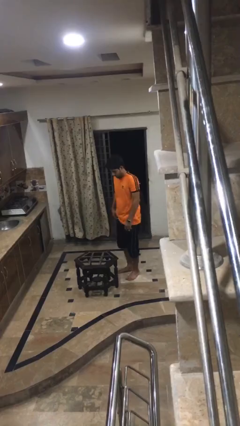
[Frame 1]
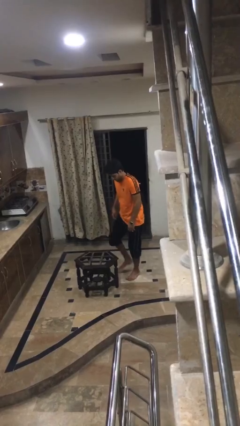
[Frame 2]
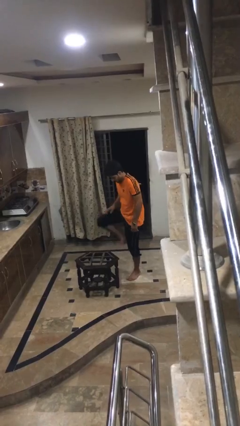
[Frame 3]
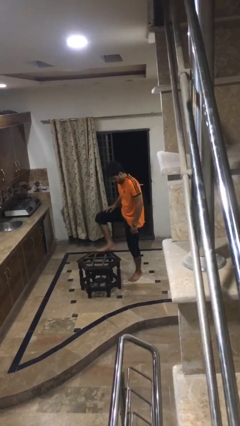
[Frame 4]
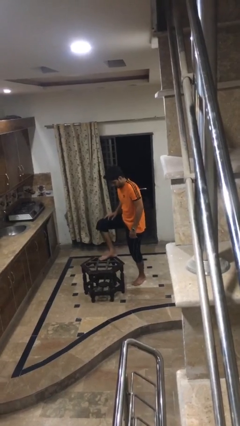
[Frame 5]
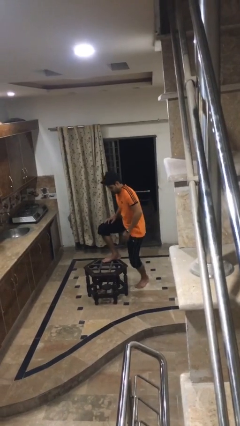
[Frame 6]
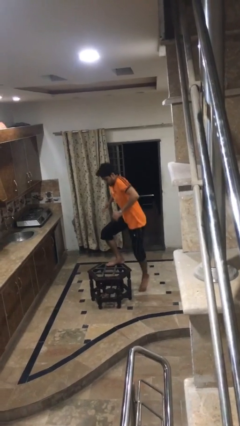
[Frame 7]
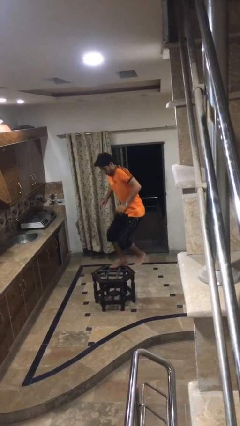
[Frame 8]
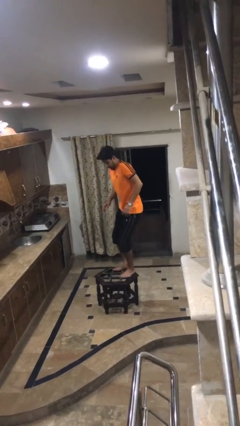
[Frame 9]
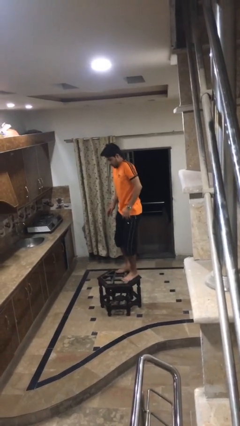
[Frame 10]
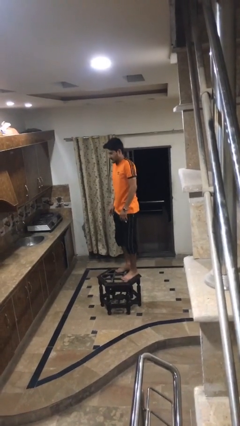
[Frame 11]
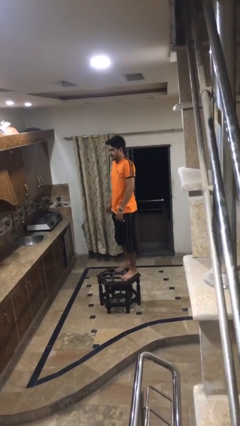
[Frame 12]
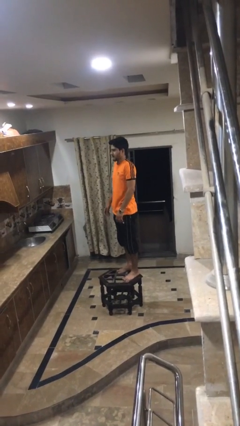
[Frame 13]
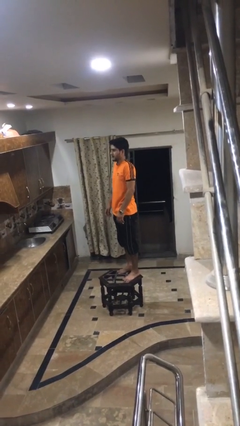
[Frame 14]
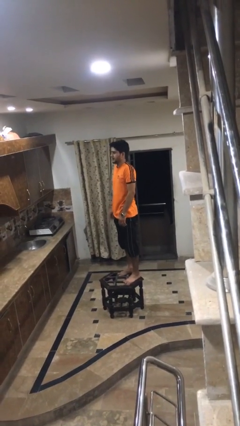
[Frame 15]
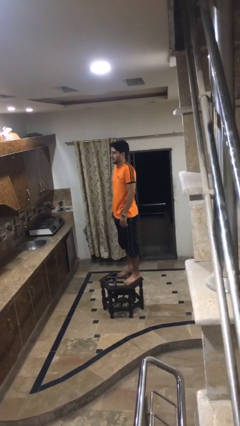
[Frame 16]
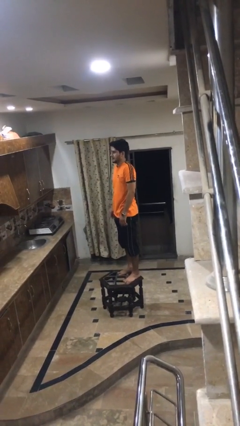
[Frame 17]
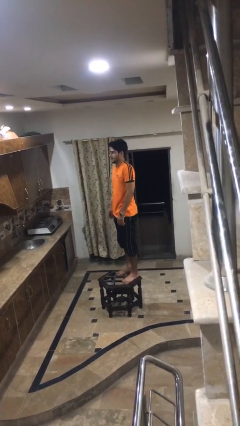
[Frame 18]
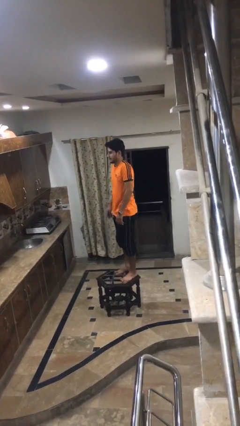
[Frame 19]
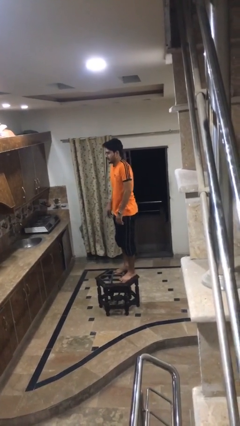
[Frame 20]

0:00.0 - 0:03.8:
person climbs on table

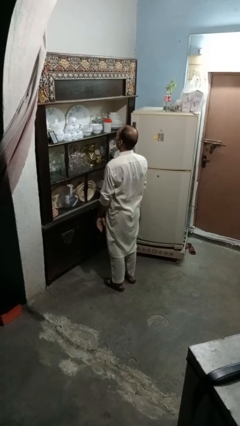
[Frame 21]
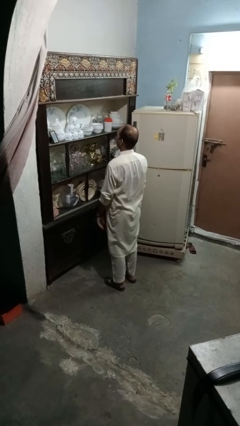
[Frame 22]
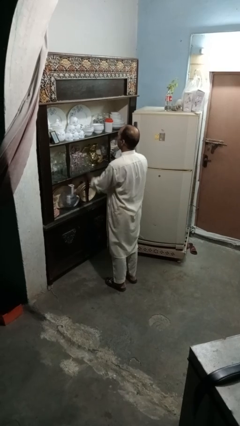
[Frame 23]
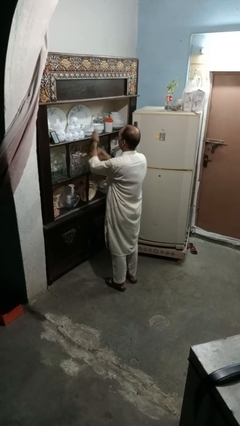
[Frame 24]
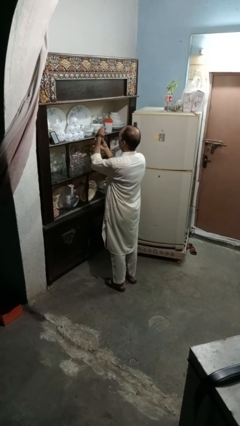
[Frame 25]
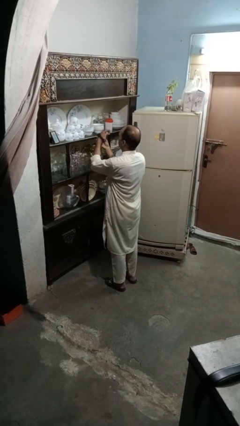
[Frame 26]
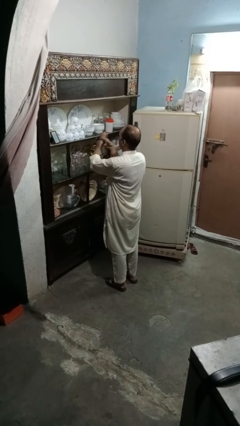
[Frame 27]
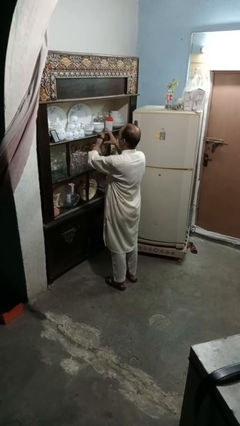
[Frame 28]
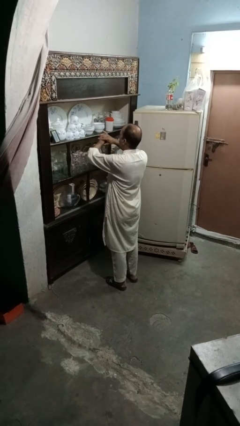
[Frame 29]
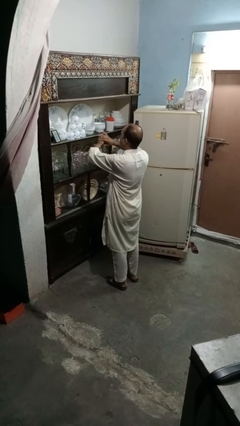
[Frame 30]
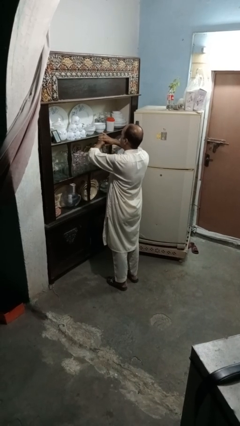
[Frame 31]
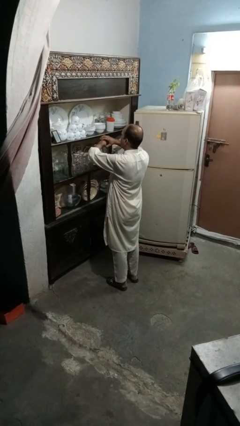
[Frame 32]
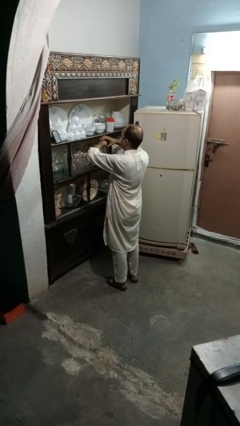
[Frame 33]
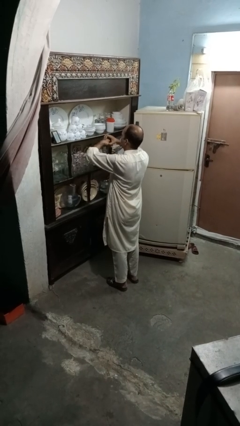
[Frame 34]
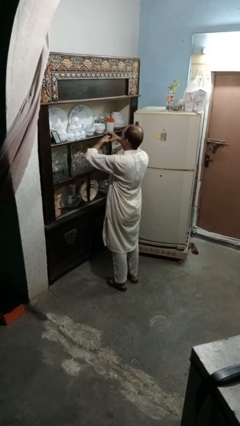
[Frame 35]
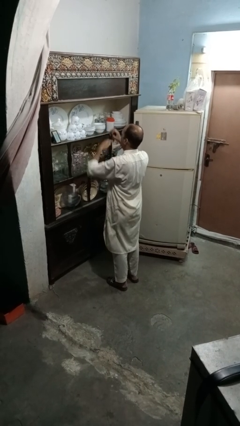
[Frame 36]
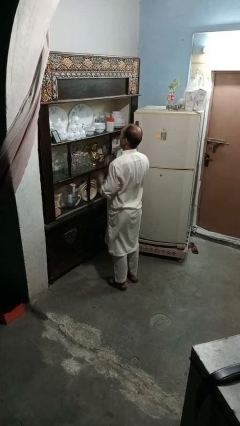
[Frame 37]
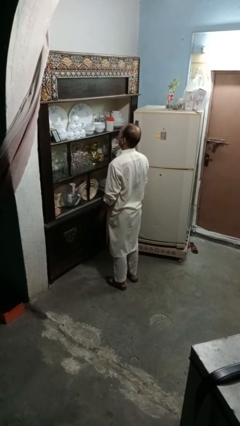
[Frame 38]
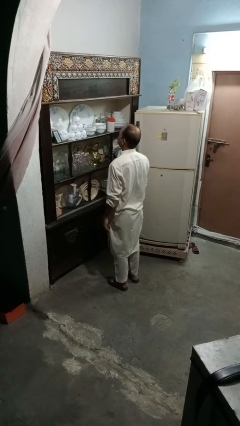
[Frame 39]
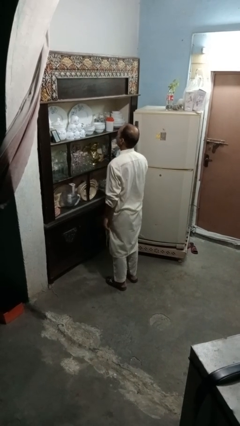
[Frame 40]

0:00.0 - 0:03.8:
person takes off wristwatch

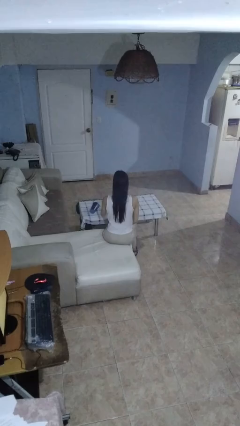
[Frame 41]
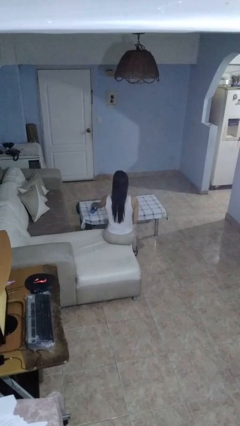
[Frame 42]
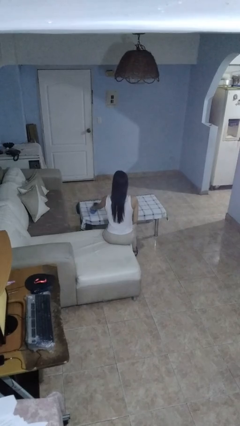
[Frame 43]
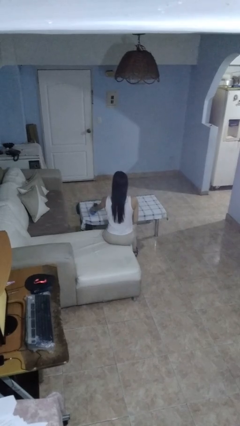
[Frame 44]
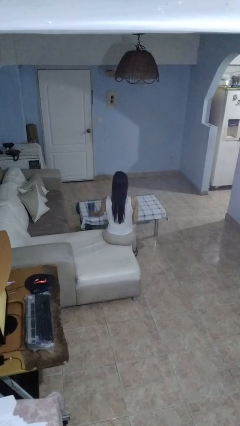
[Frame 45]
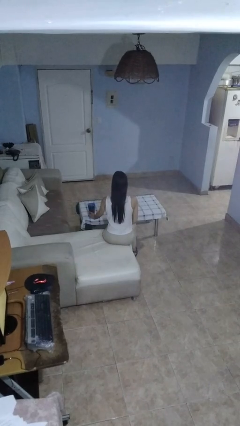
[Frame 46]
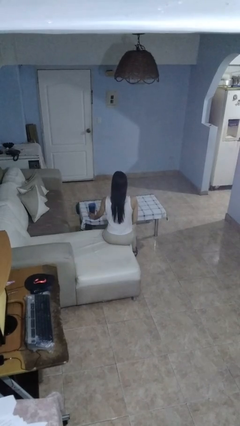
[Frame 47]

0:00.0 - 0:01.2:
person sets upright glass

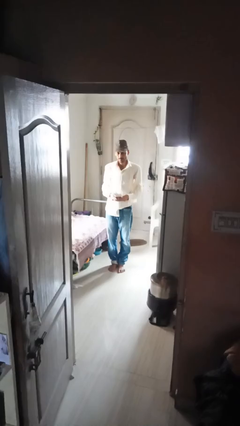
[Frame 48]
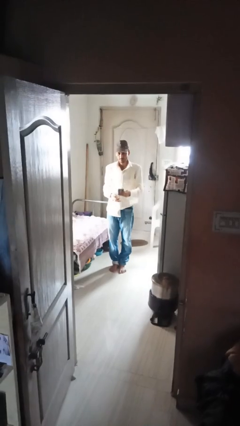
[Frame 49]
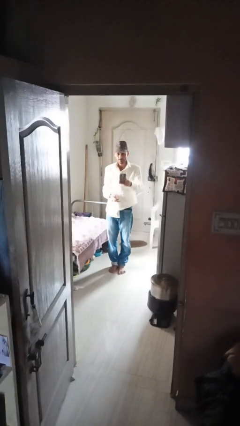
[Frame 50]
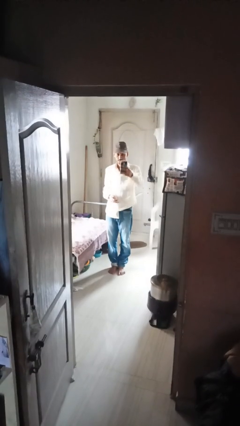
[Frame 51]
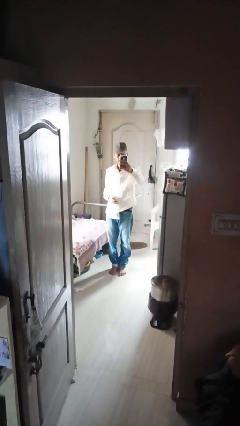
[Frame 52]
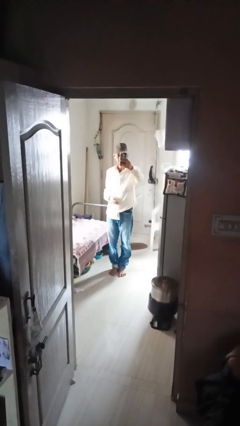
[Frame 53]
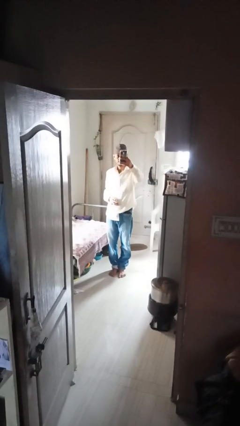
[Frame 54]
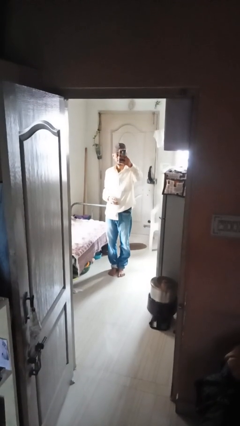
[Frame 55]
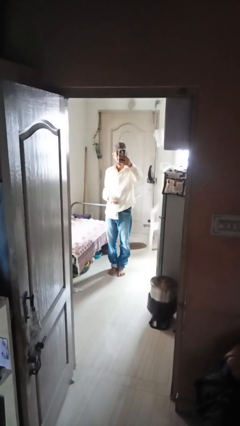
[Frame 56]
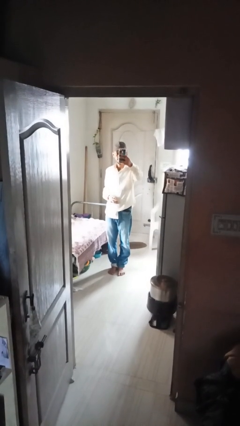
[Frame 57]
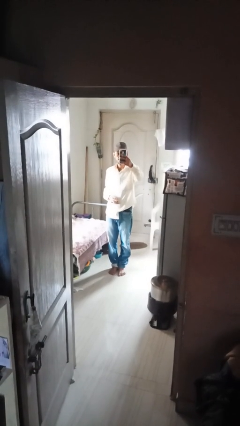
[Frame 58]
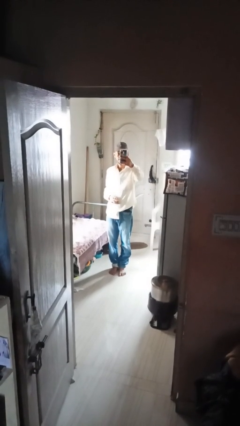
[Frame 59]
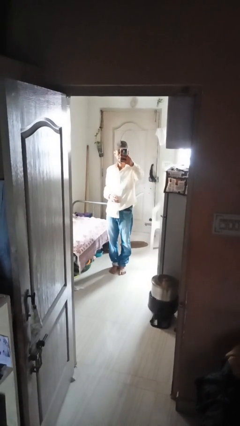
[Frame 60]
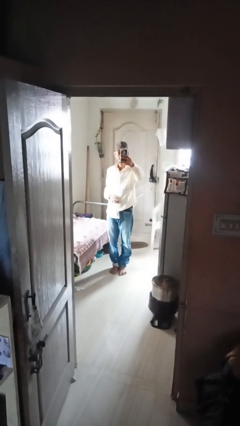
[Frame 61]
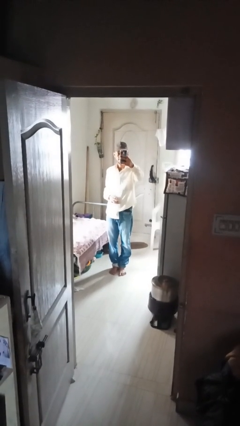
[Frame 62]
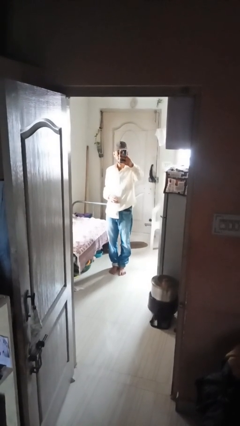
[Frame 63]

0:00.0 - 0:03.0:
person takes selfie

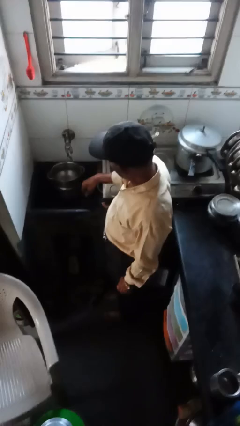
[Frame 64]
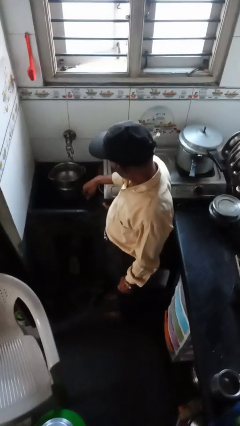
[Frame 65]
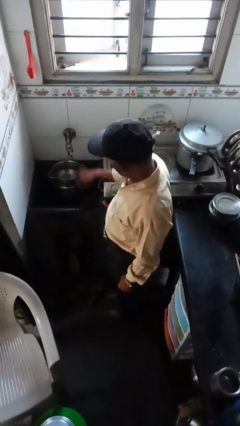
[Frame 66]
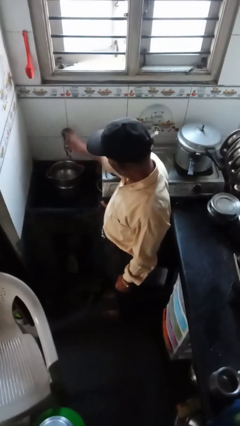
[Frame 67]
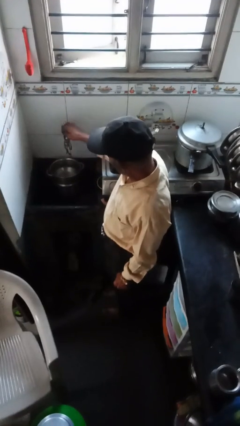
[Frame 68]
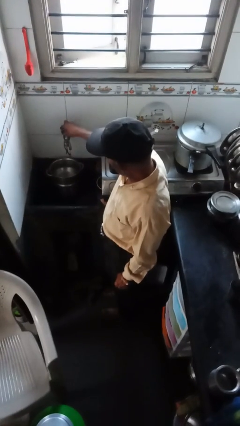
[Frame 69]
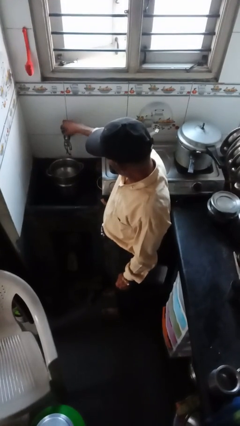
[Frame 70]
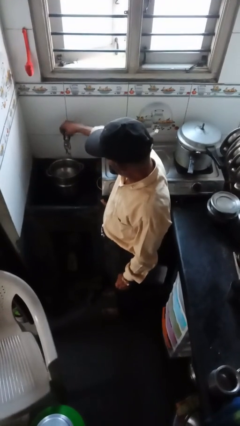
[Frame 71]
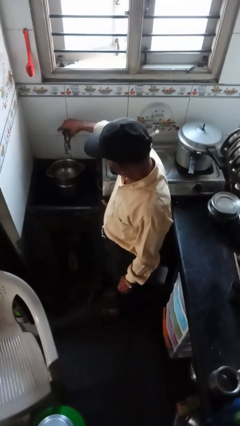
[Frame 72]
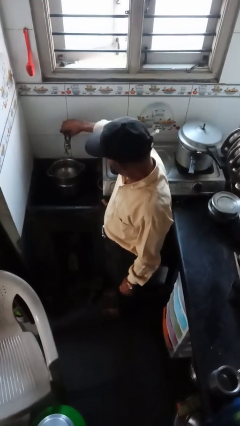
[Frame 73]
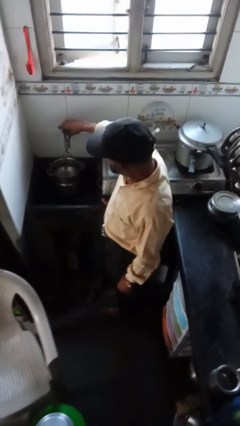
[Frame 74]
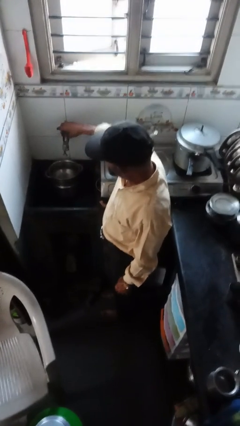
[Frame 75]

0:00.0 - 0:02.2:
person turns on faucet

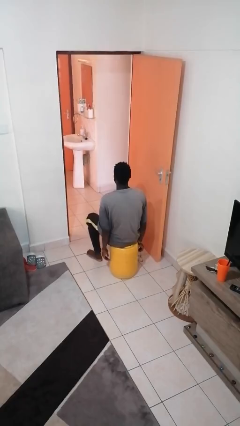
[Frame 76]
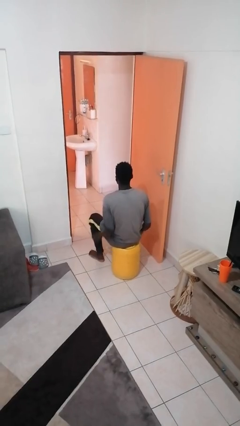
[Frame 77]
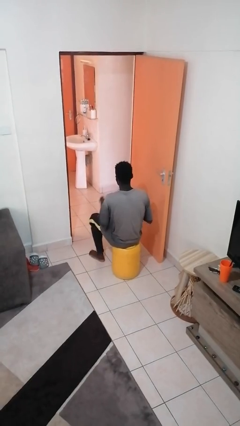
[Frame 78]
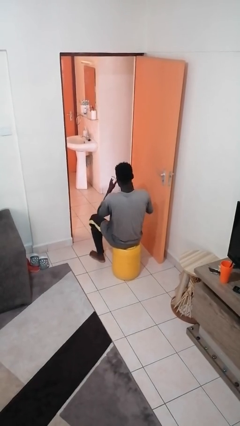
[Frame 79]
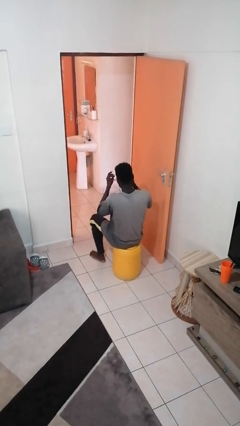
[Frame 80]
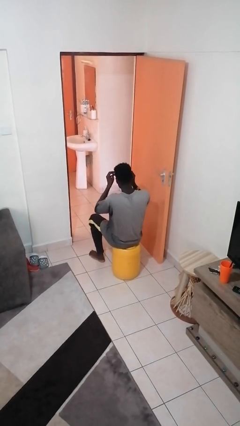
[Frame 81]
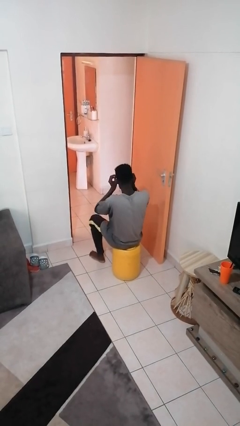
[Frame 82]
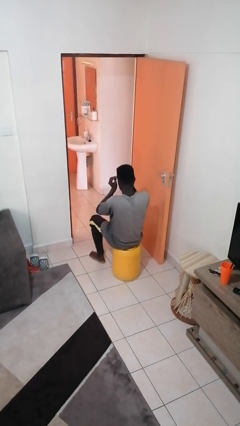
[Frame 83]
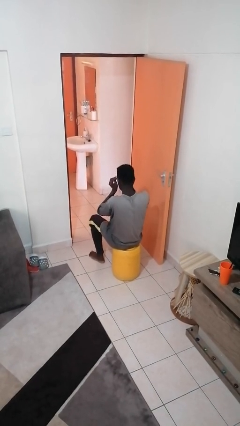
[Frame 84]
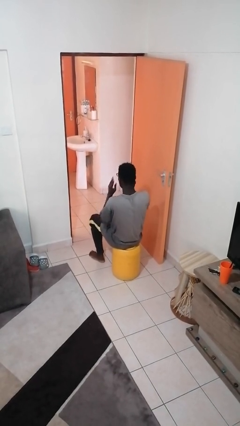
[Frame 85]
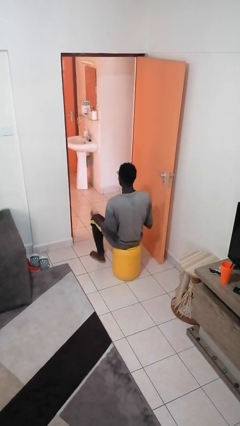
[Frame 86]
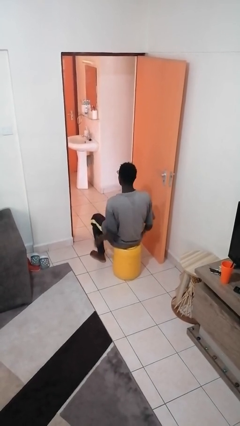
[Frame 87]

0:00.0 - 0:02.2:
person puts on glasses

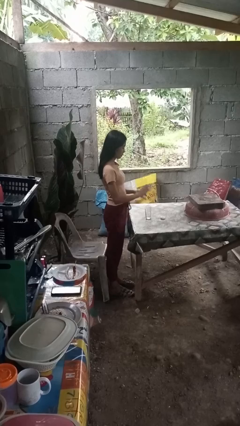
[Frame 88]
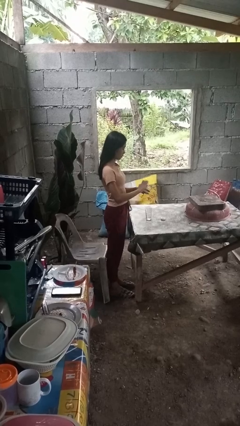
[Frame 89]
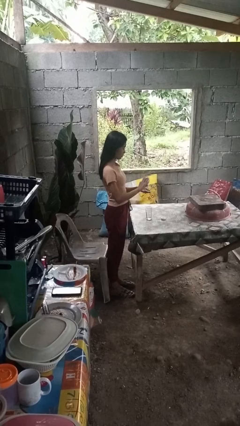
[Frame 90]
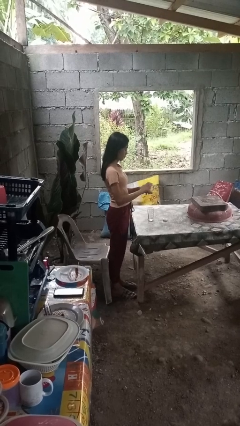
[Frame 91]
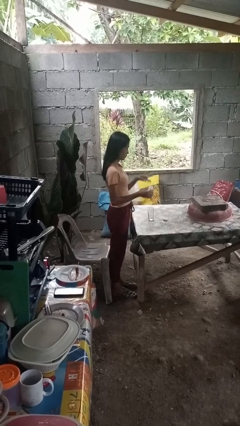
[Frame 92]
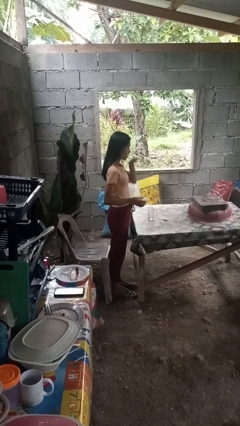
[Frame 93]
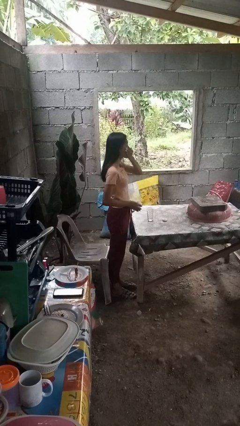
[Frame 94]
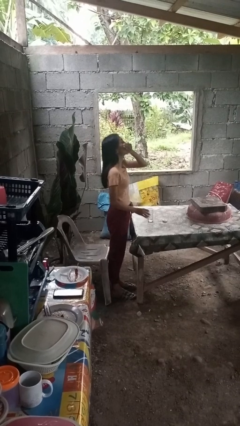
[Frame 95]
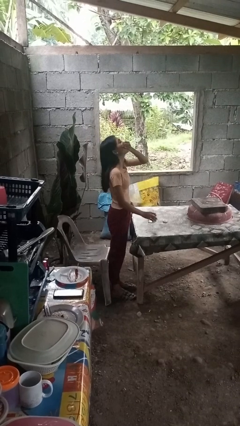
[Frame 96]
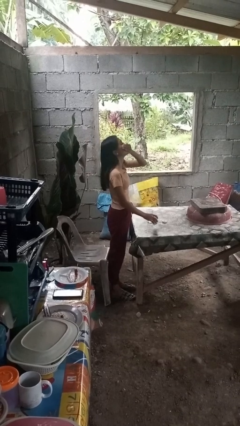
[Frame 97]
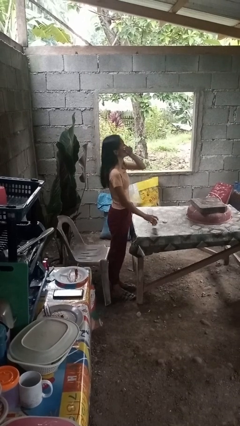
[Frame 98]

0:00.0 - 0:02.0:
person takes medicine pills
